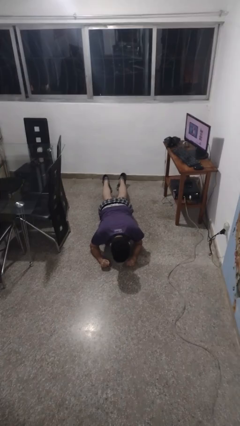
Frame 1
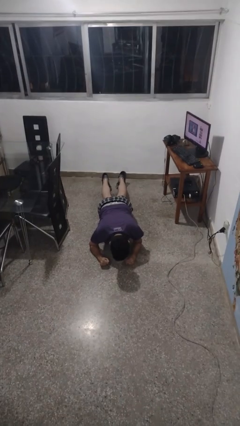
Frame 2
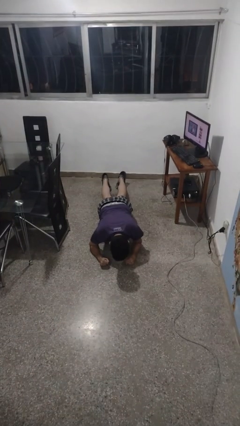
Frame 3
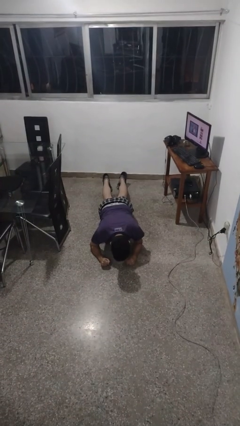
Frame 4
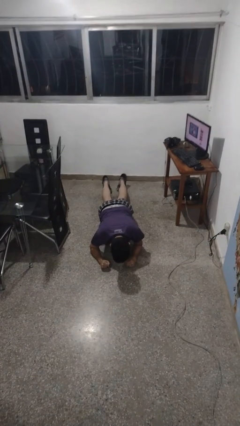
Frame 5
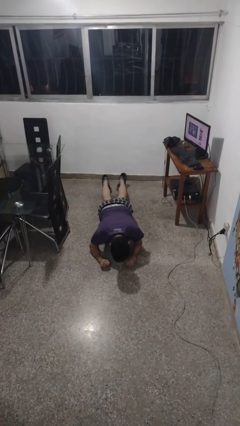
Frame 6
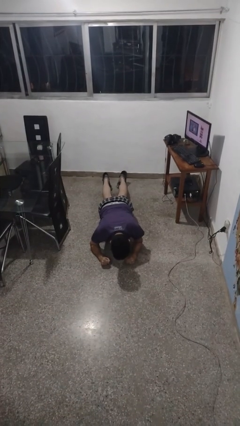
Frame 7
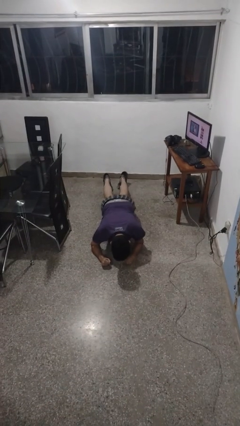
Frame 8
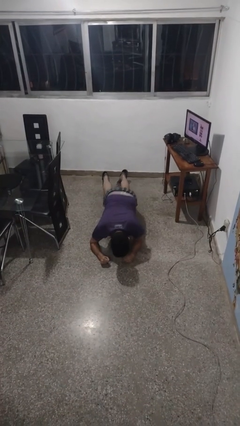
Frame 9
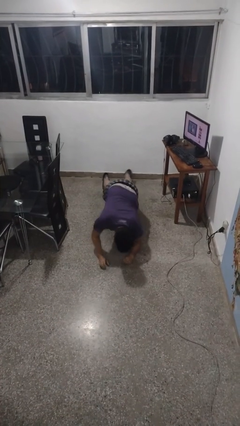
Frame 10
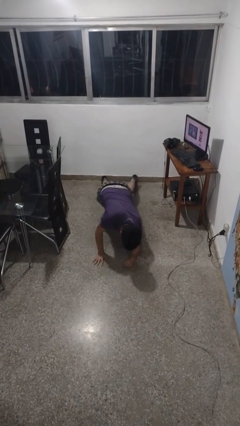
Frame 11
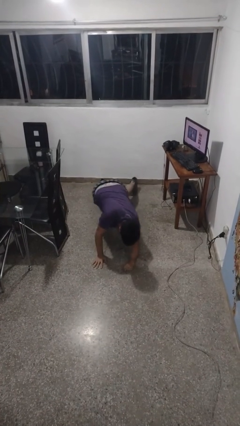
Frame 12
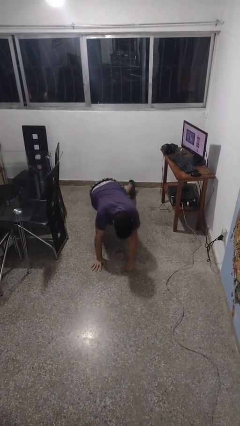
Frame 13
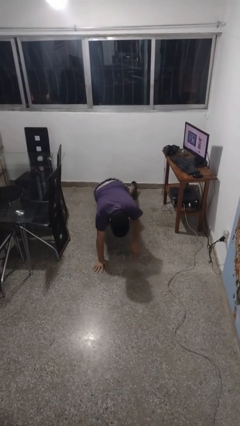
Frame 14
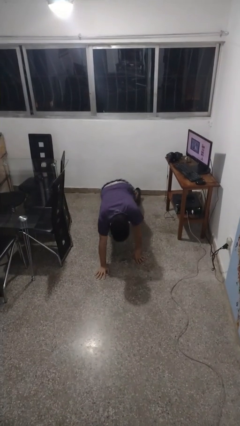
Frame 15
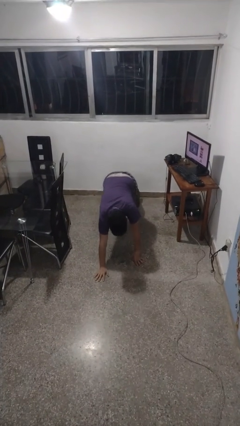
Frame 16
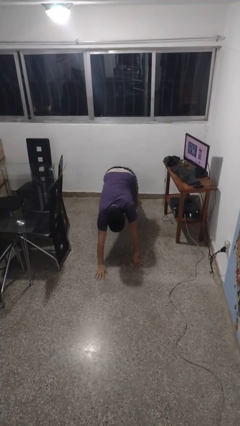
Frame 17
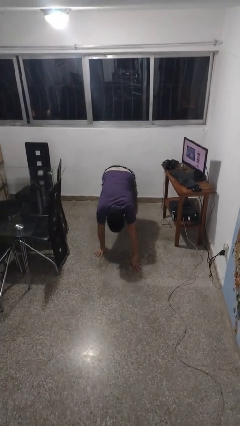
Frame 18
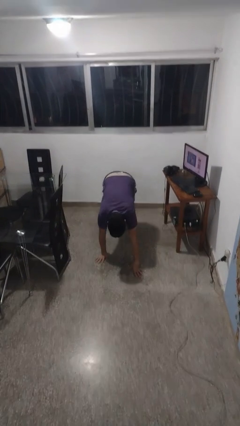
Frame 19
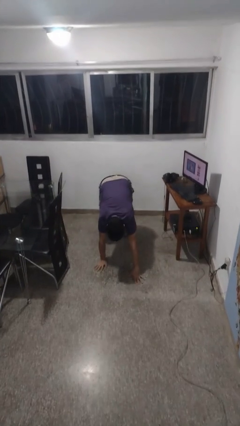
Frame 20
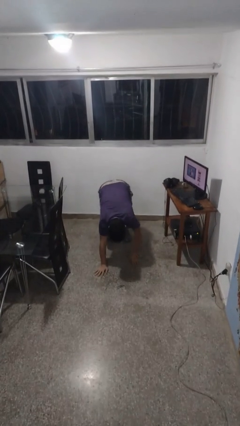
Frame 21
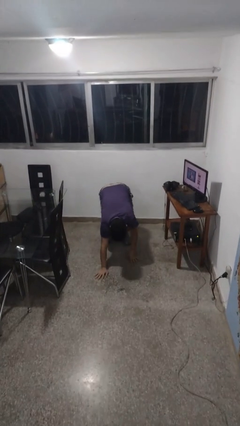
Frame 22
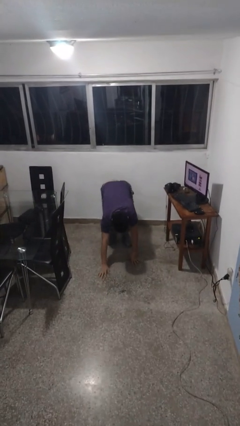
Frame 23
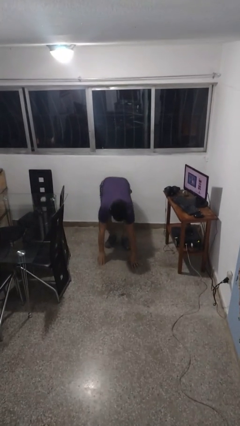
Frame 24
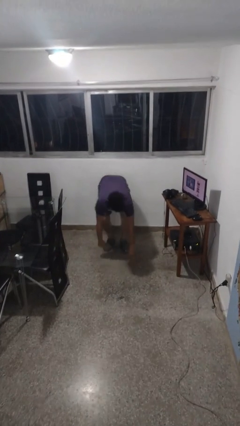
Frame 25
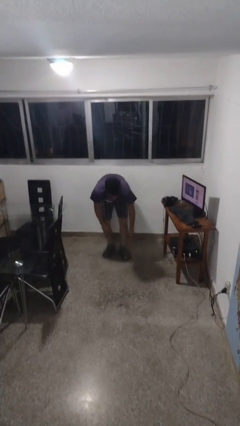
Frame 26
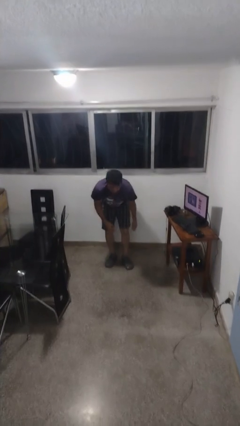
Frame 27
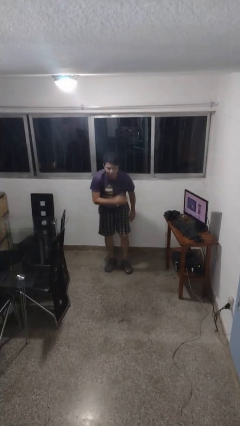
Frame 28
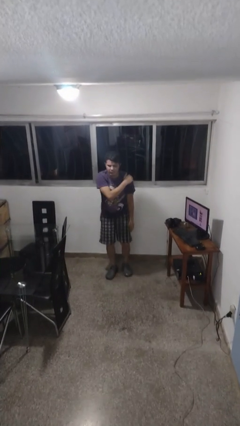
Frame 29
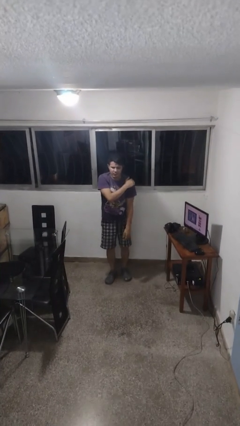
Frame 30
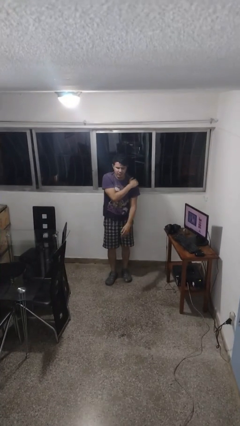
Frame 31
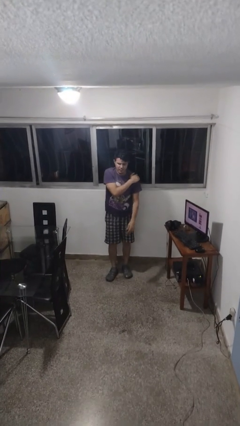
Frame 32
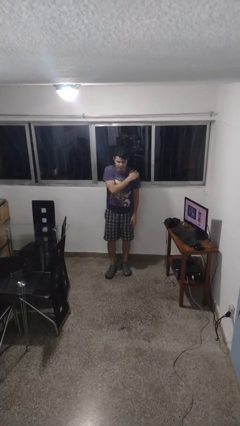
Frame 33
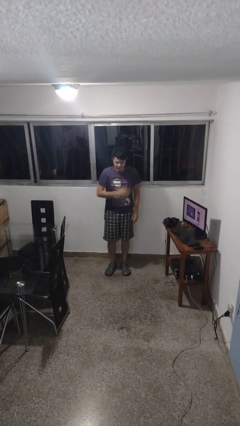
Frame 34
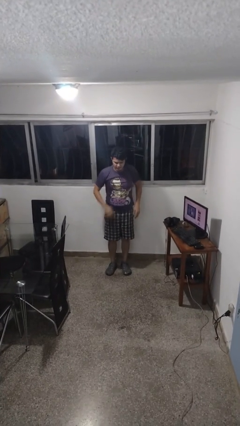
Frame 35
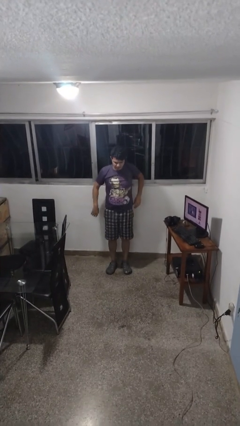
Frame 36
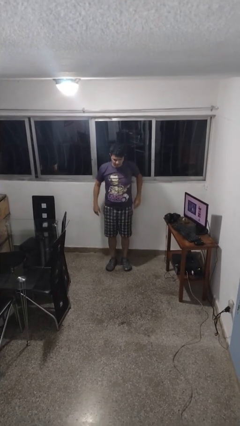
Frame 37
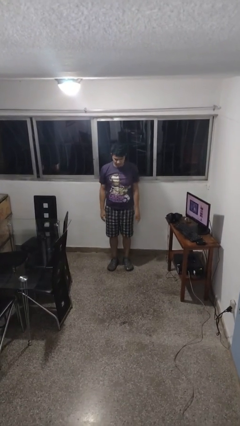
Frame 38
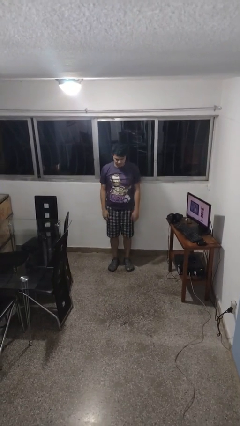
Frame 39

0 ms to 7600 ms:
person stands up from floor

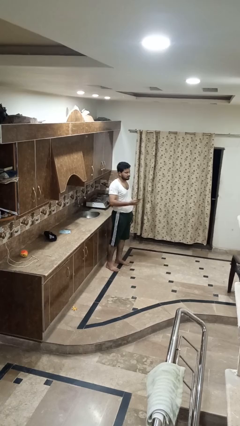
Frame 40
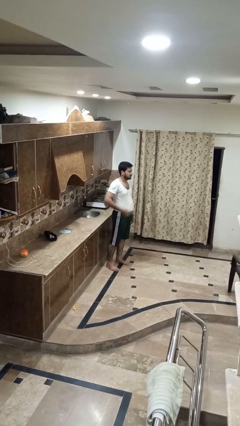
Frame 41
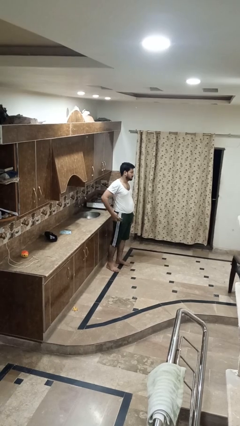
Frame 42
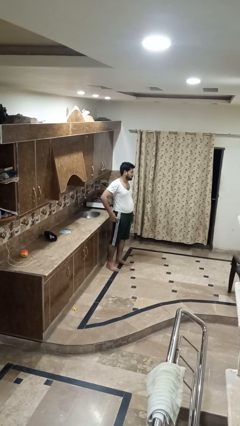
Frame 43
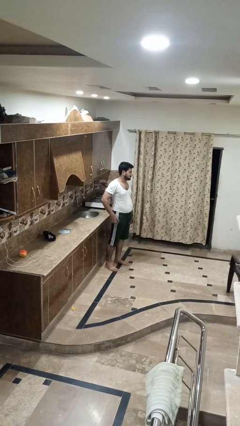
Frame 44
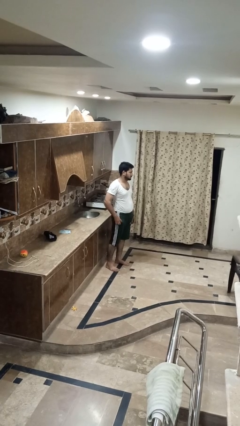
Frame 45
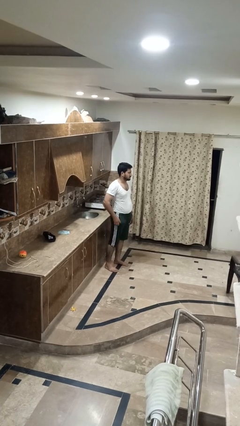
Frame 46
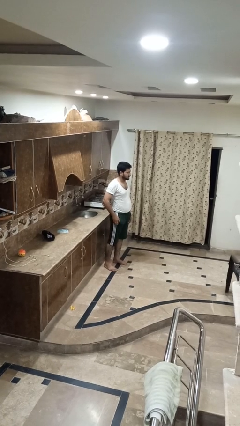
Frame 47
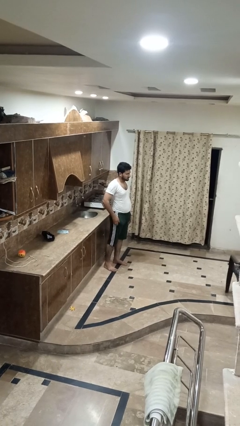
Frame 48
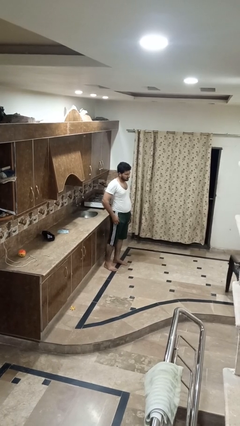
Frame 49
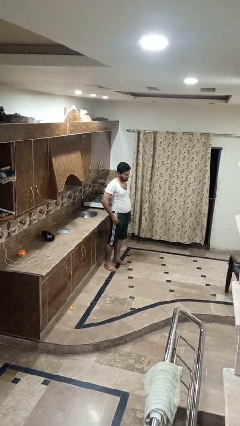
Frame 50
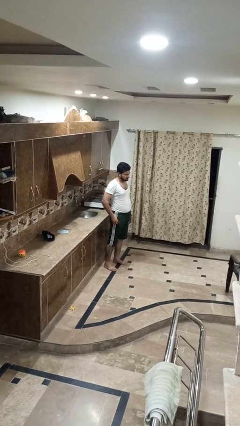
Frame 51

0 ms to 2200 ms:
person puts phone into pocket

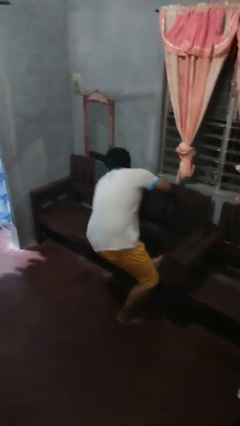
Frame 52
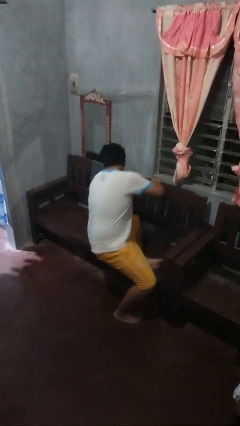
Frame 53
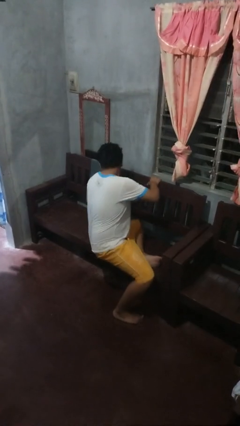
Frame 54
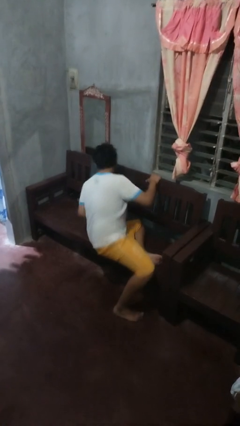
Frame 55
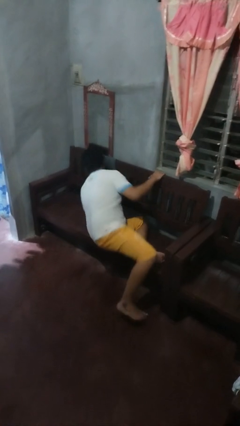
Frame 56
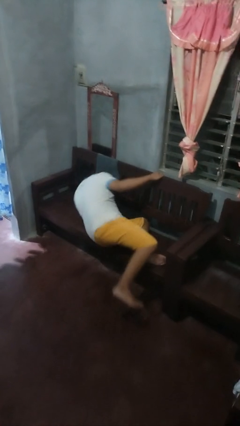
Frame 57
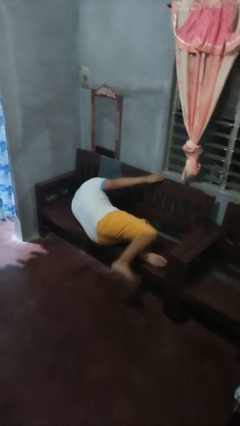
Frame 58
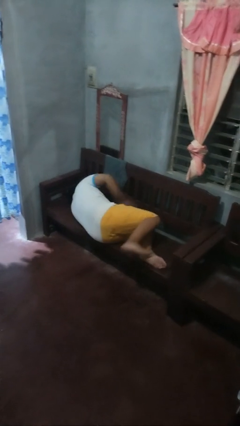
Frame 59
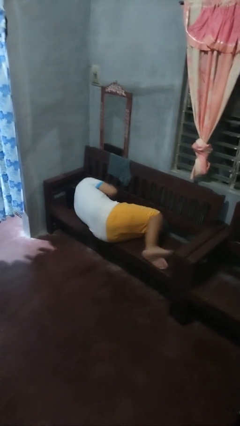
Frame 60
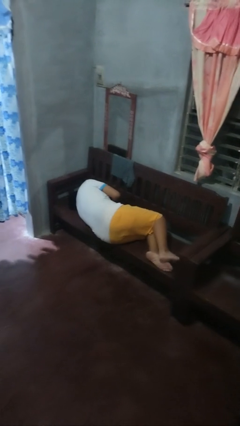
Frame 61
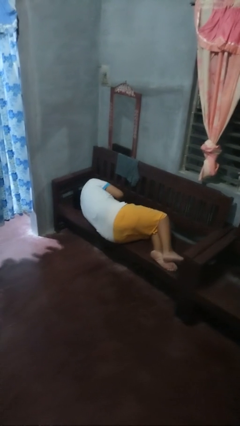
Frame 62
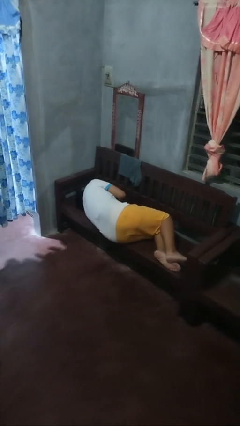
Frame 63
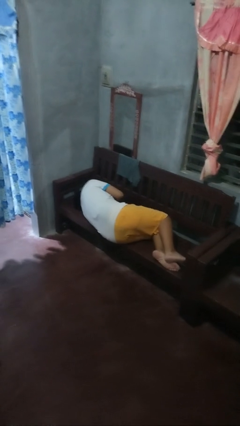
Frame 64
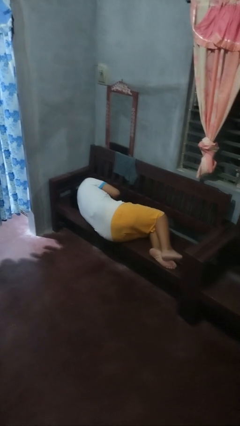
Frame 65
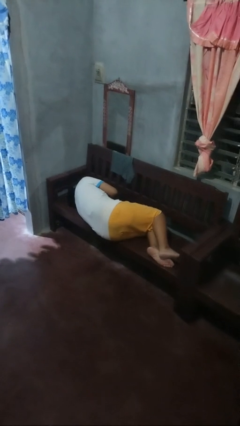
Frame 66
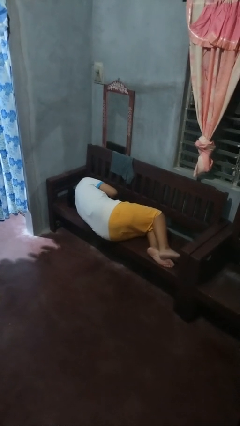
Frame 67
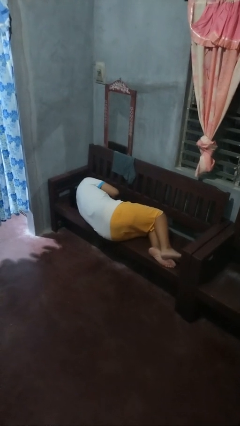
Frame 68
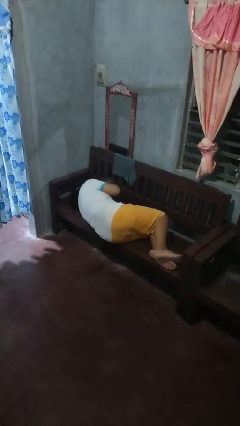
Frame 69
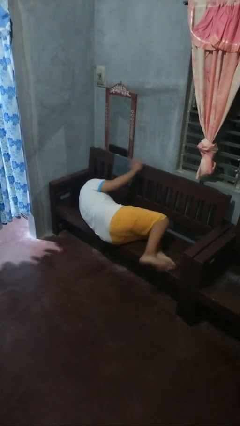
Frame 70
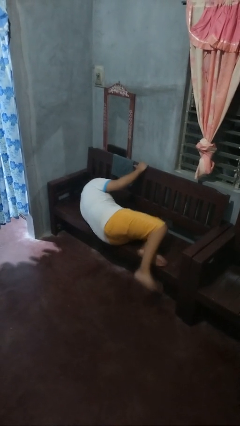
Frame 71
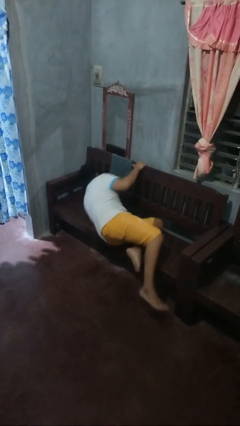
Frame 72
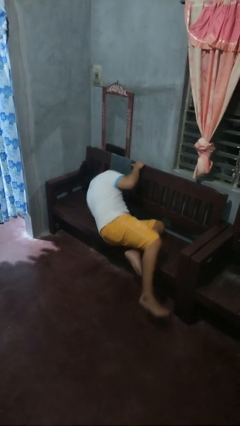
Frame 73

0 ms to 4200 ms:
person lies down on couch

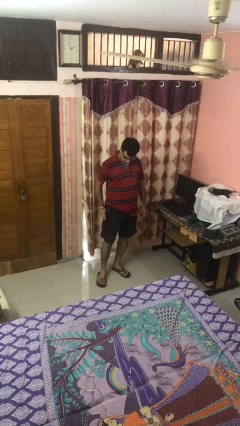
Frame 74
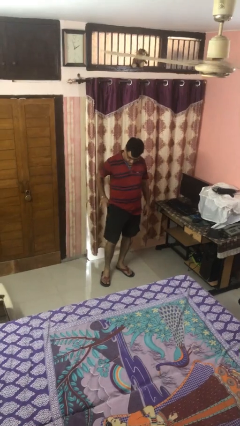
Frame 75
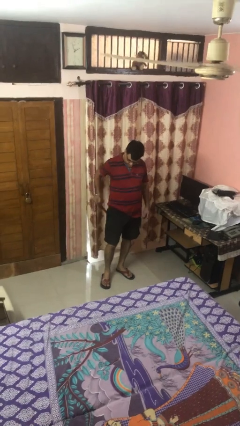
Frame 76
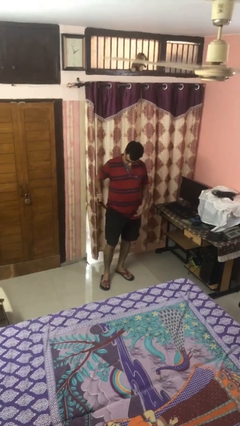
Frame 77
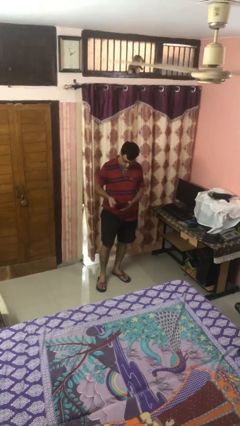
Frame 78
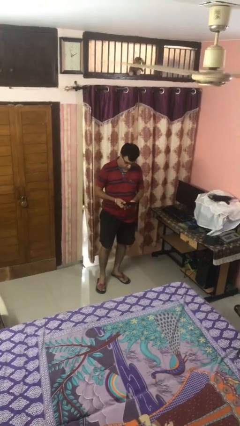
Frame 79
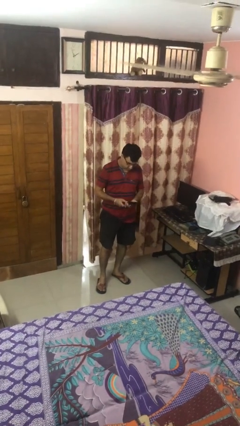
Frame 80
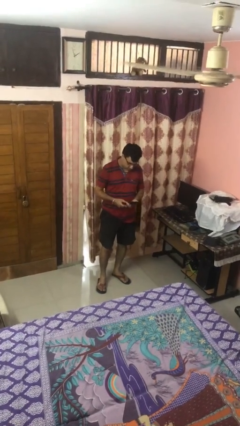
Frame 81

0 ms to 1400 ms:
person takes phone from pocket

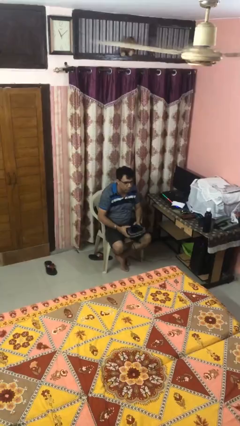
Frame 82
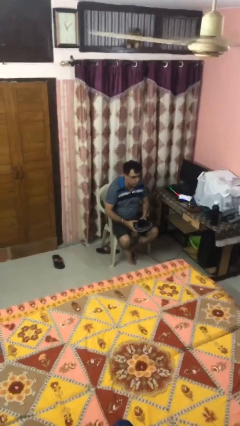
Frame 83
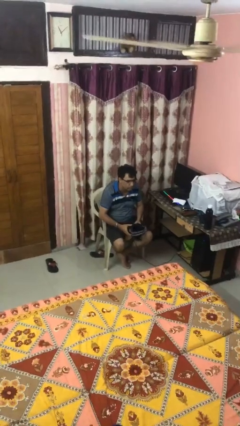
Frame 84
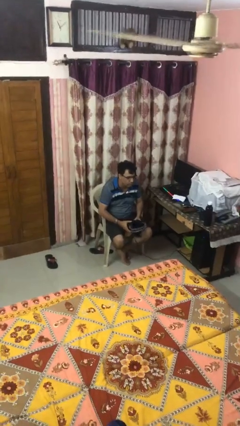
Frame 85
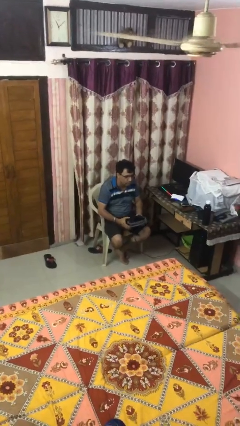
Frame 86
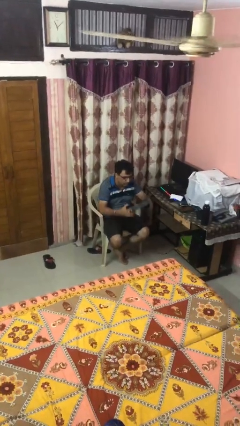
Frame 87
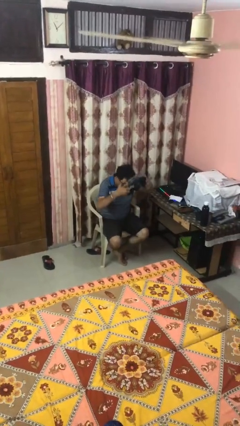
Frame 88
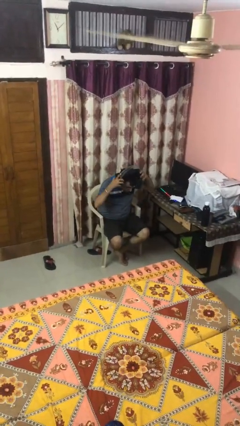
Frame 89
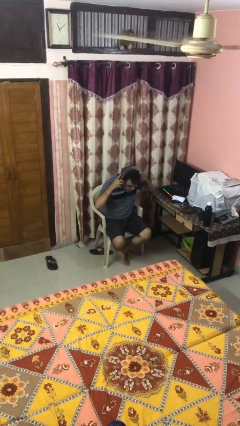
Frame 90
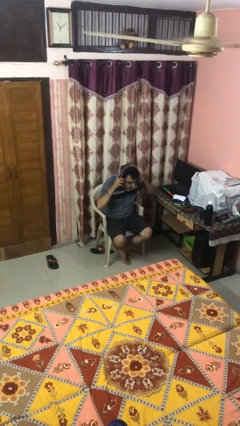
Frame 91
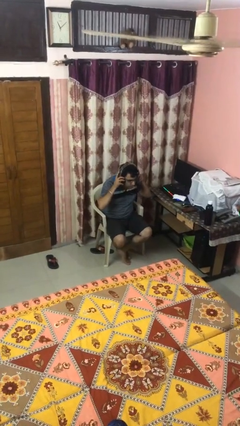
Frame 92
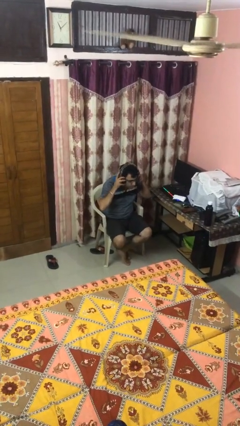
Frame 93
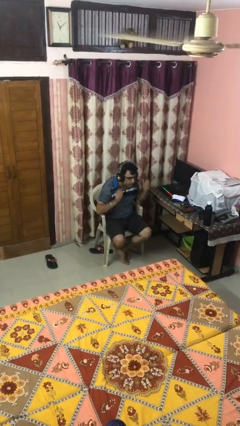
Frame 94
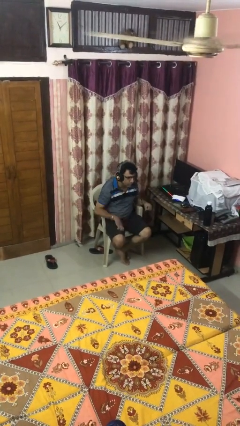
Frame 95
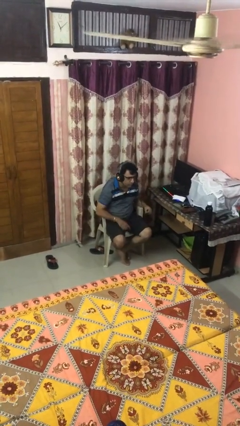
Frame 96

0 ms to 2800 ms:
person puts on headphones
